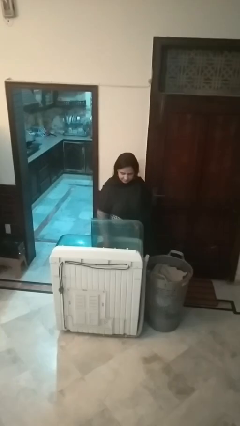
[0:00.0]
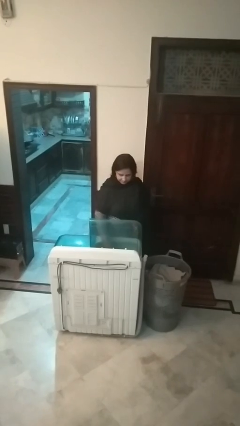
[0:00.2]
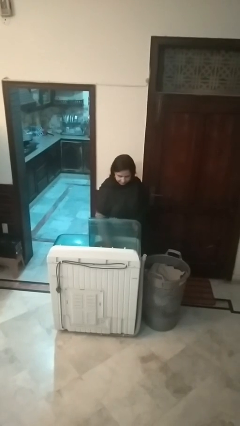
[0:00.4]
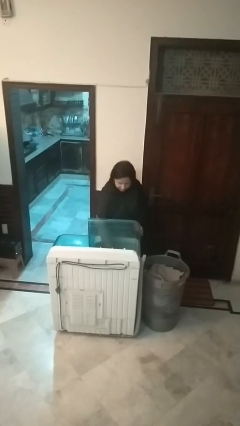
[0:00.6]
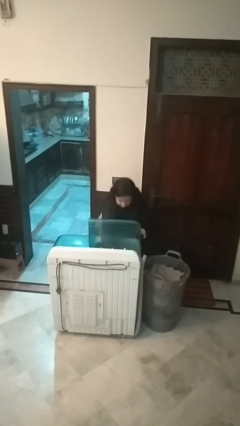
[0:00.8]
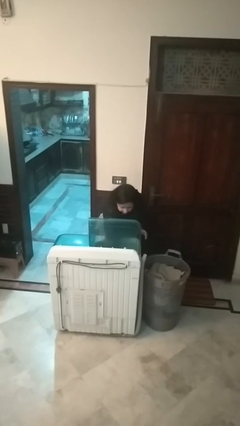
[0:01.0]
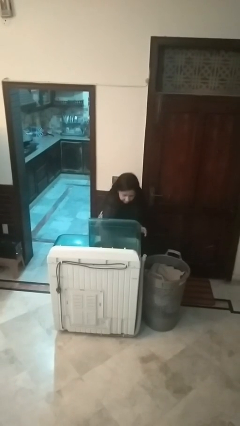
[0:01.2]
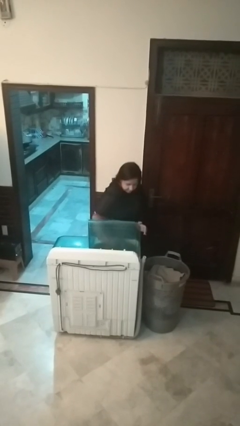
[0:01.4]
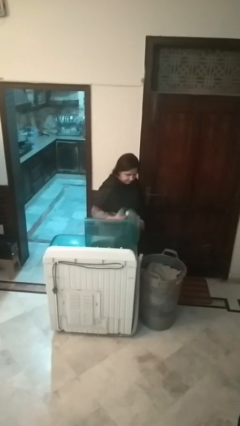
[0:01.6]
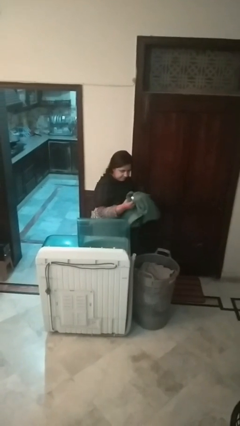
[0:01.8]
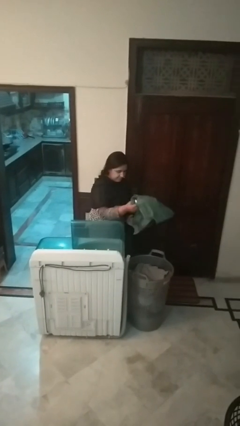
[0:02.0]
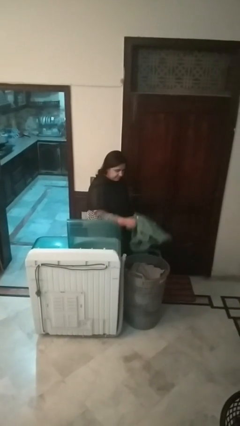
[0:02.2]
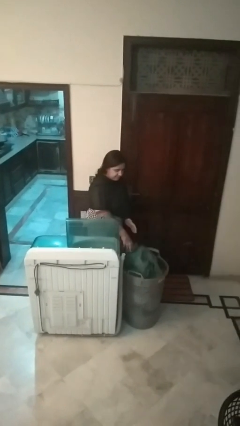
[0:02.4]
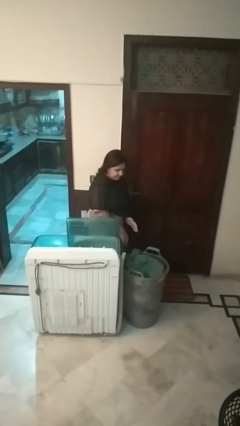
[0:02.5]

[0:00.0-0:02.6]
person unloads clotheswasher

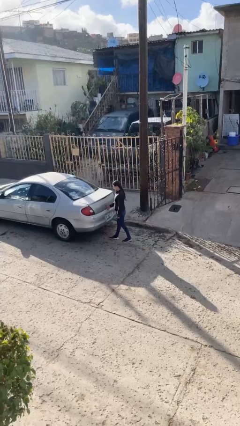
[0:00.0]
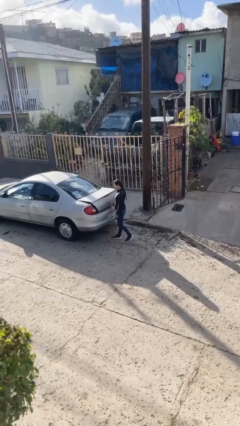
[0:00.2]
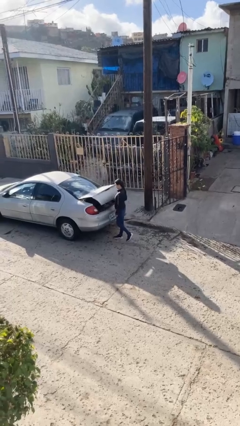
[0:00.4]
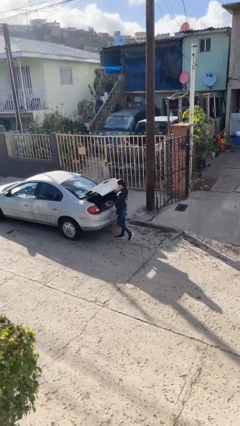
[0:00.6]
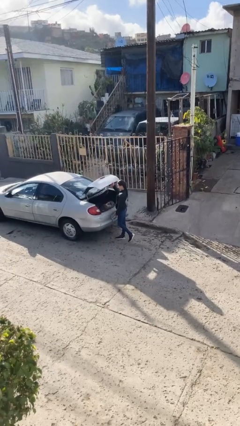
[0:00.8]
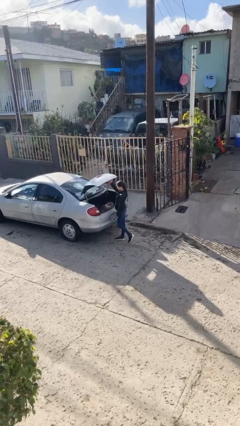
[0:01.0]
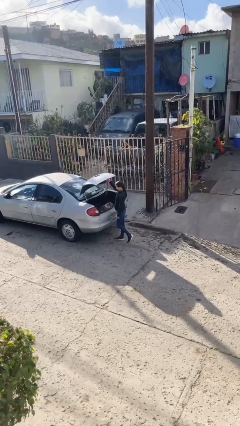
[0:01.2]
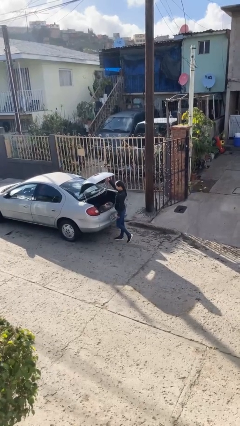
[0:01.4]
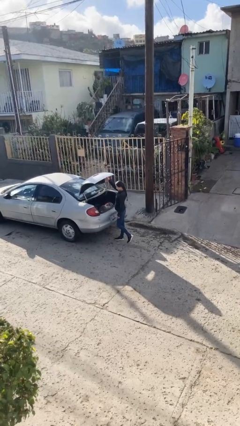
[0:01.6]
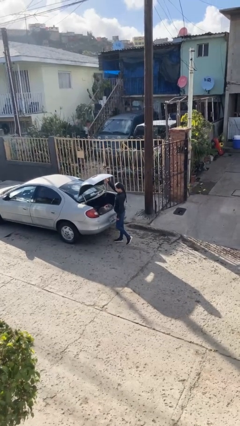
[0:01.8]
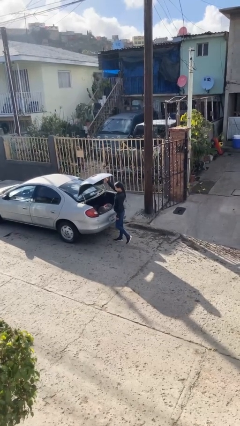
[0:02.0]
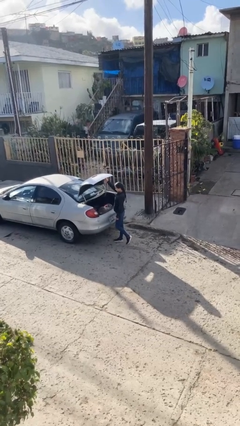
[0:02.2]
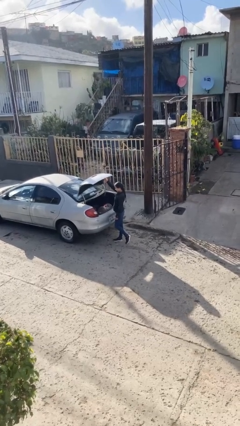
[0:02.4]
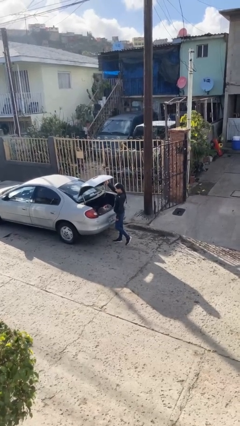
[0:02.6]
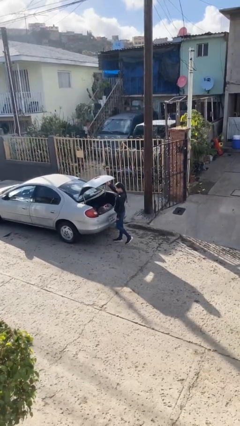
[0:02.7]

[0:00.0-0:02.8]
person opens car trunk

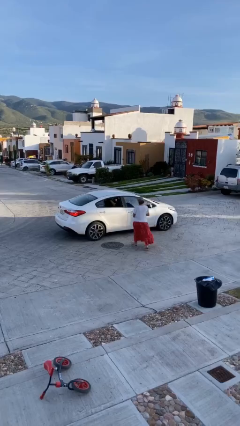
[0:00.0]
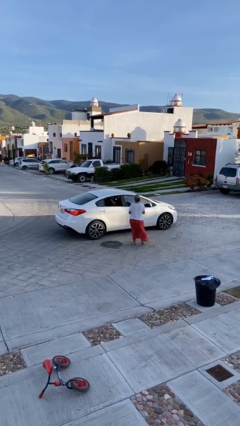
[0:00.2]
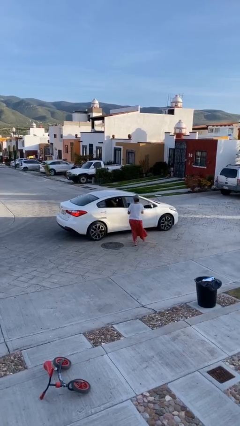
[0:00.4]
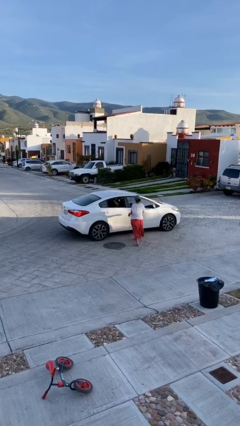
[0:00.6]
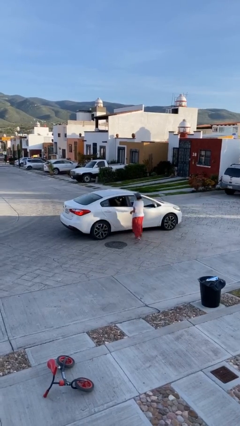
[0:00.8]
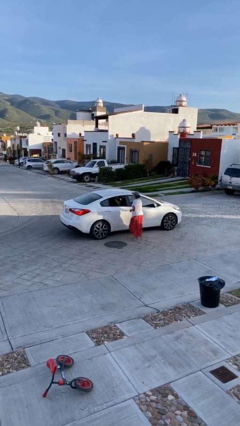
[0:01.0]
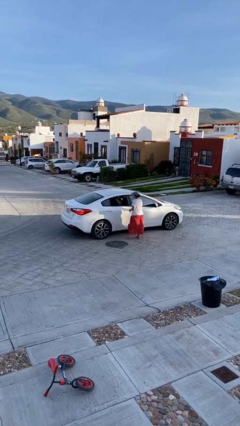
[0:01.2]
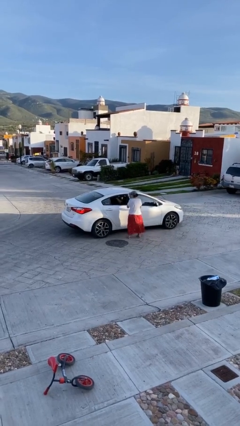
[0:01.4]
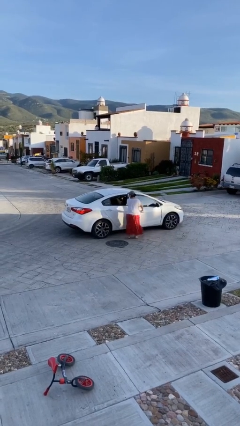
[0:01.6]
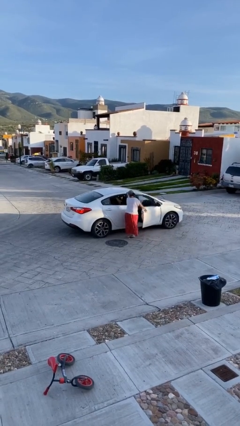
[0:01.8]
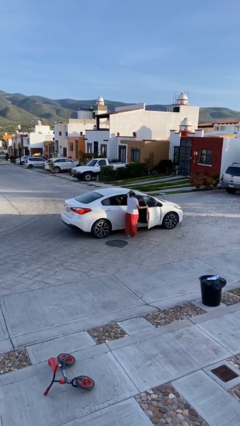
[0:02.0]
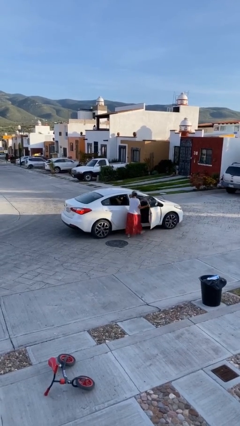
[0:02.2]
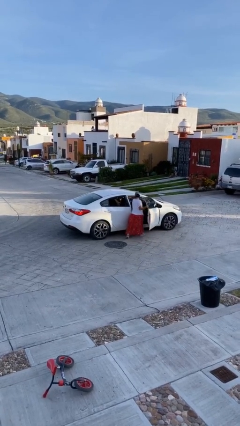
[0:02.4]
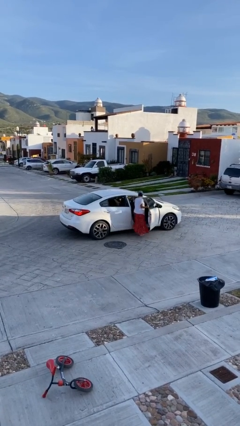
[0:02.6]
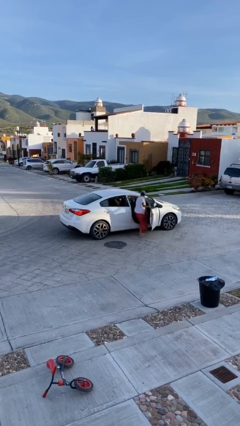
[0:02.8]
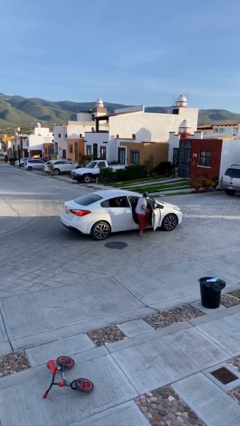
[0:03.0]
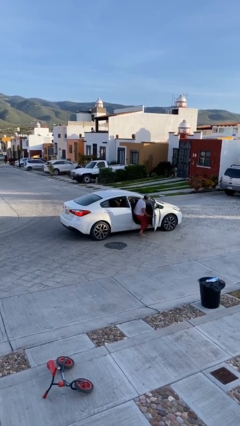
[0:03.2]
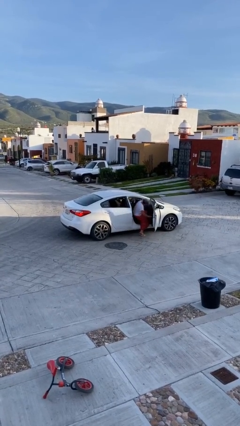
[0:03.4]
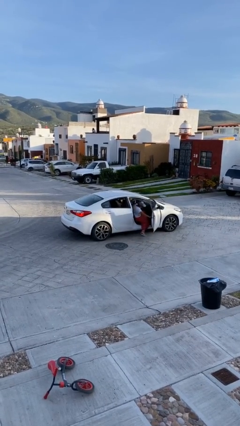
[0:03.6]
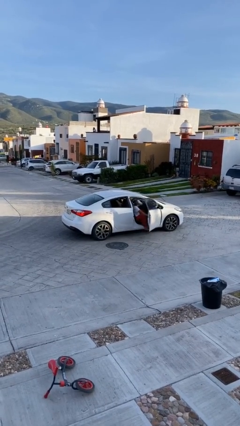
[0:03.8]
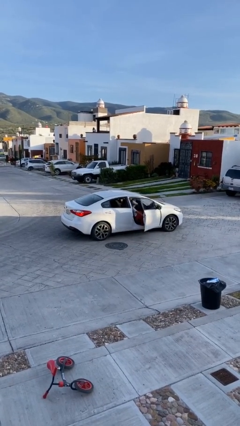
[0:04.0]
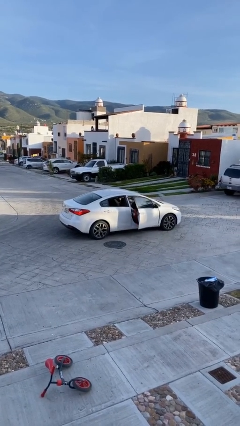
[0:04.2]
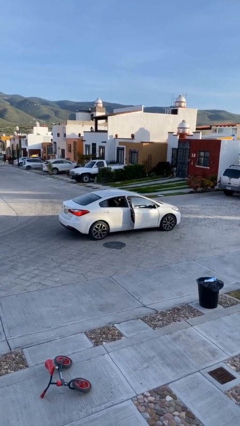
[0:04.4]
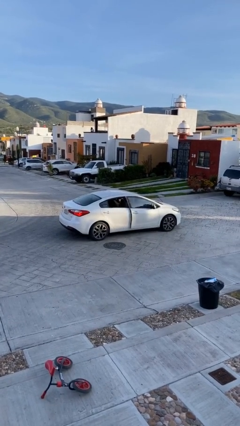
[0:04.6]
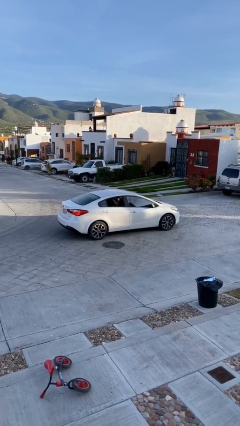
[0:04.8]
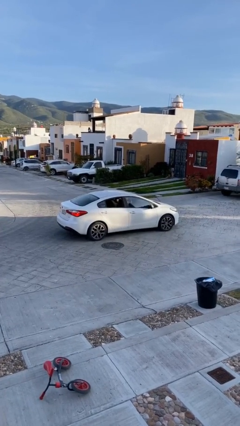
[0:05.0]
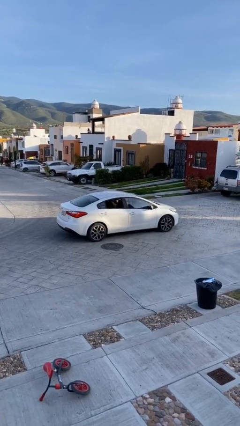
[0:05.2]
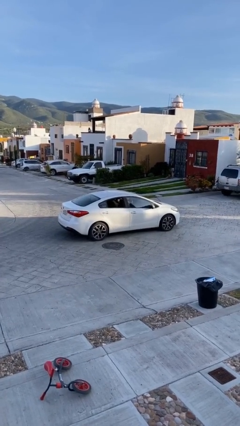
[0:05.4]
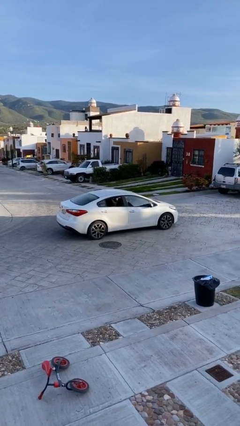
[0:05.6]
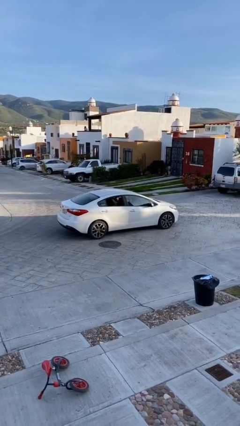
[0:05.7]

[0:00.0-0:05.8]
car picks up person

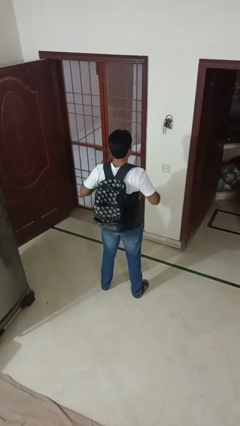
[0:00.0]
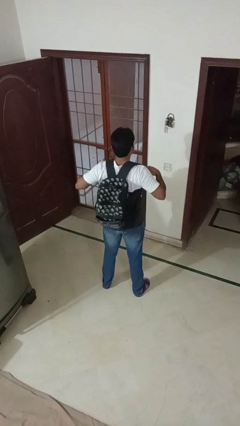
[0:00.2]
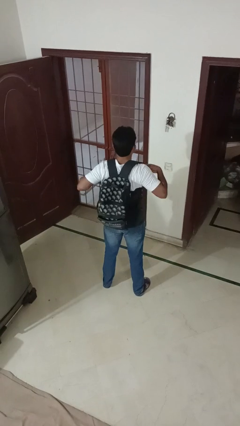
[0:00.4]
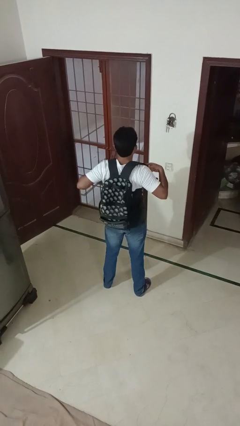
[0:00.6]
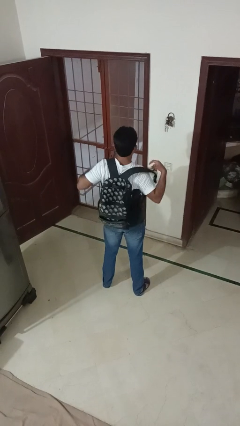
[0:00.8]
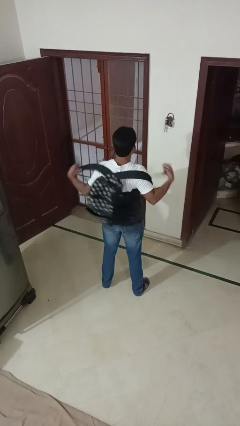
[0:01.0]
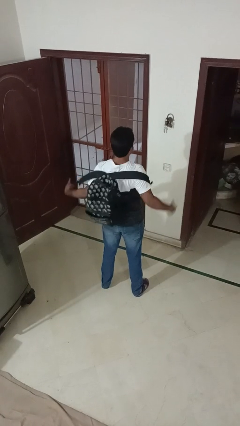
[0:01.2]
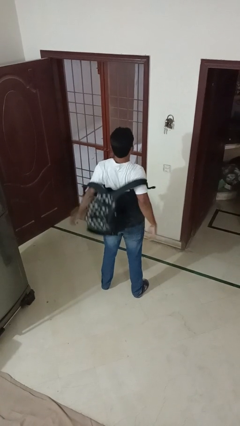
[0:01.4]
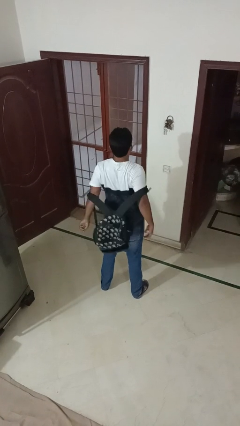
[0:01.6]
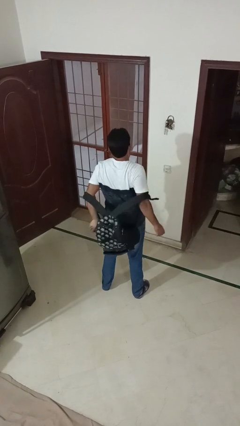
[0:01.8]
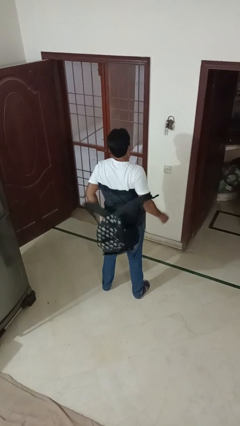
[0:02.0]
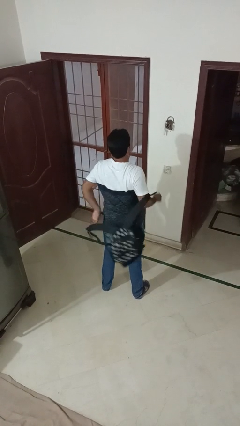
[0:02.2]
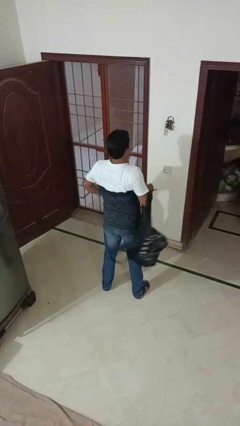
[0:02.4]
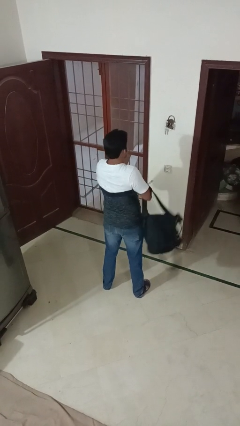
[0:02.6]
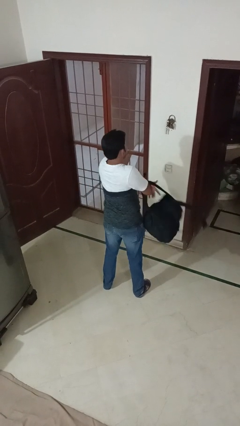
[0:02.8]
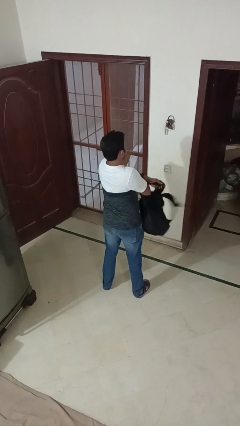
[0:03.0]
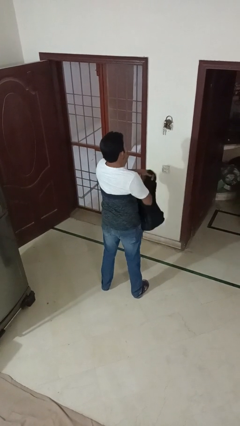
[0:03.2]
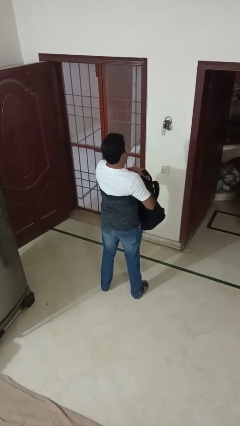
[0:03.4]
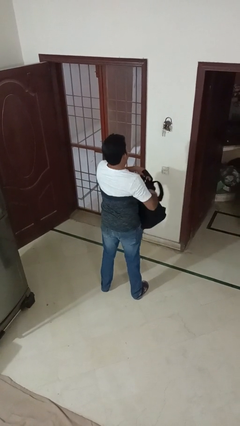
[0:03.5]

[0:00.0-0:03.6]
person takes off backpack

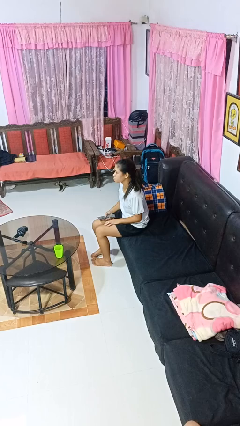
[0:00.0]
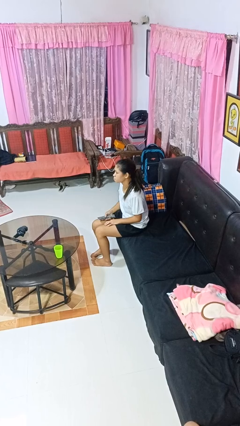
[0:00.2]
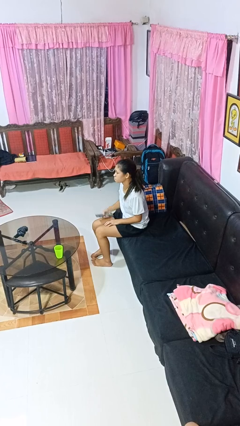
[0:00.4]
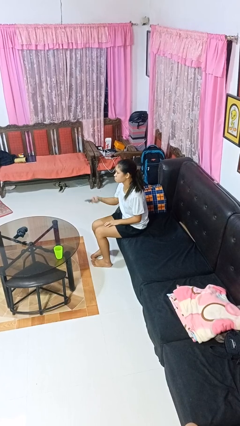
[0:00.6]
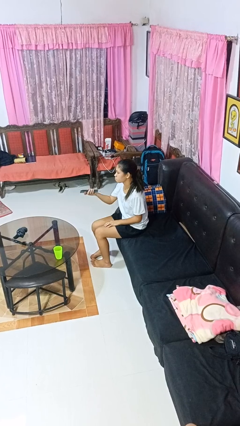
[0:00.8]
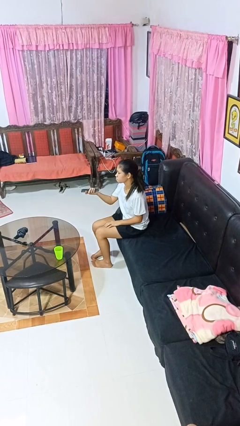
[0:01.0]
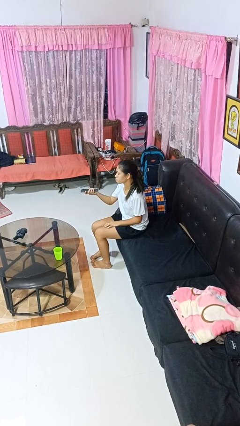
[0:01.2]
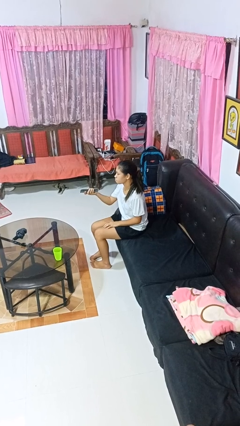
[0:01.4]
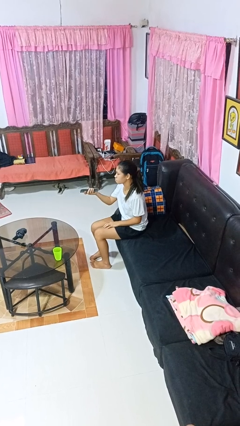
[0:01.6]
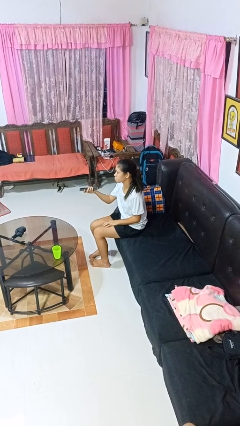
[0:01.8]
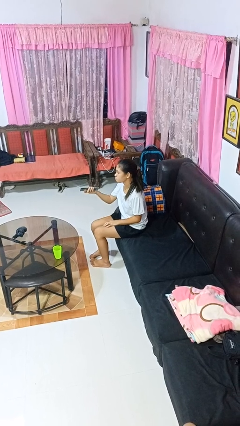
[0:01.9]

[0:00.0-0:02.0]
person uses television remote

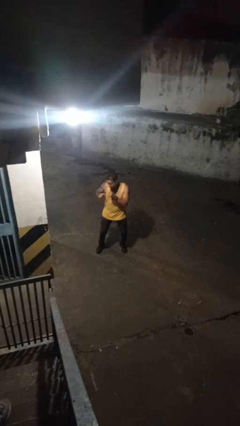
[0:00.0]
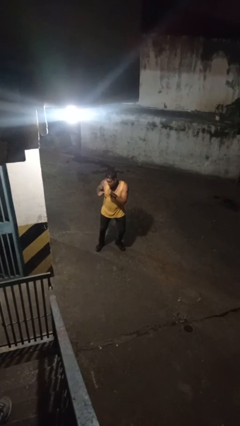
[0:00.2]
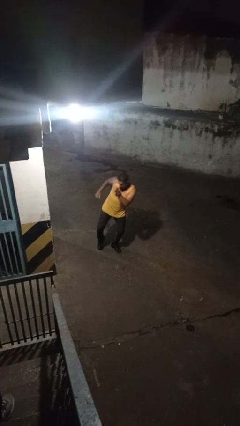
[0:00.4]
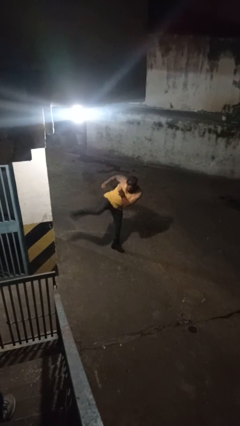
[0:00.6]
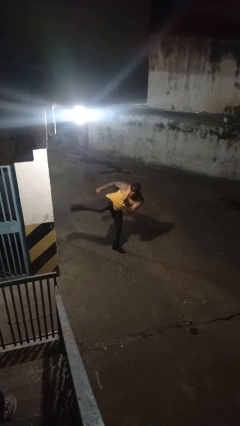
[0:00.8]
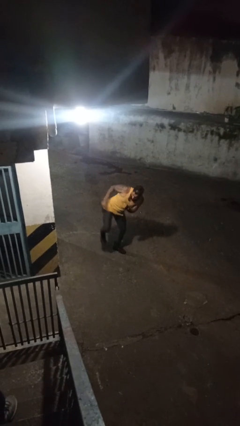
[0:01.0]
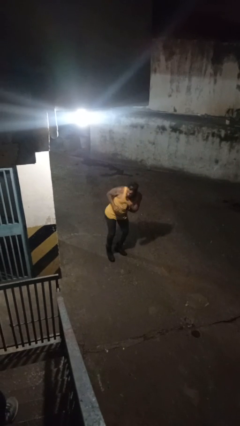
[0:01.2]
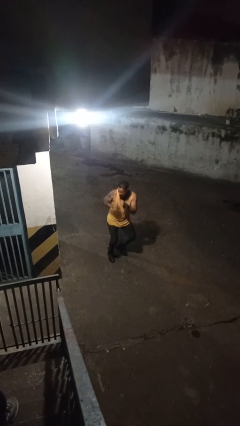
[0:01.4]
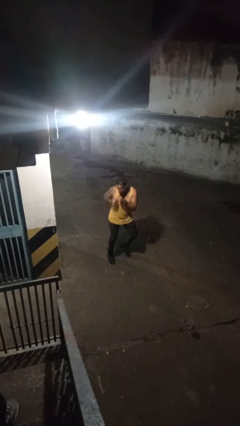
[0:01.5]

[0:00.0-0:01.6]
person karate kicks
